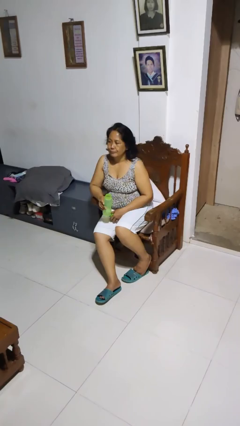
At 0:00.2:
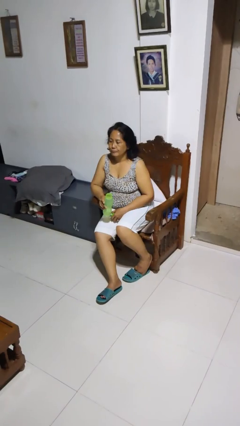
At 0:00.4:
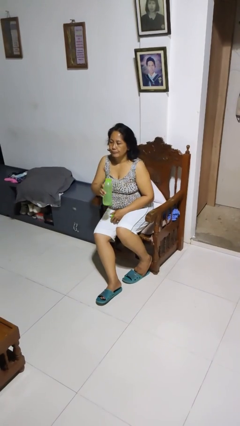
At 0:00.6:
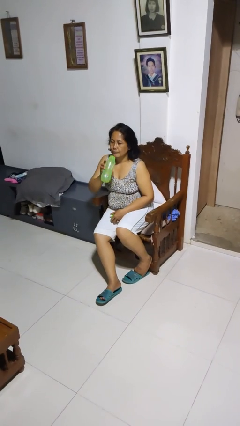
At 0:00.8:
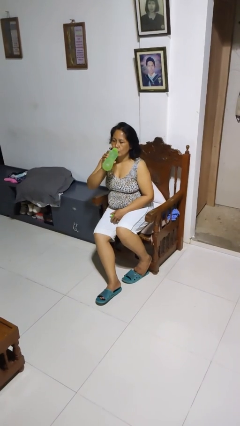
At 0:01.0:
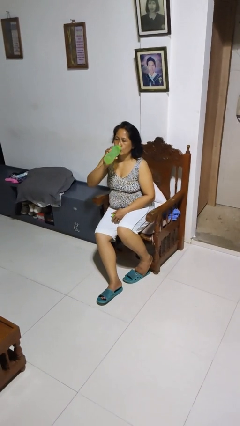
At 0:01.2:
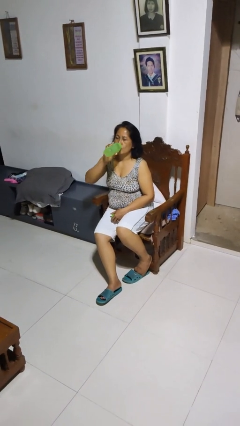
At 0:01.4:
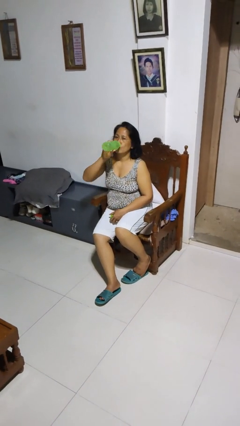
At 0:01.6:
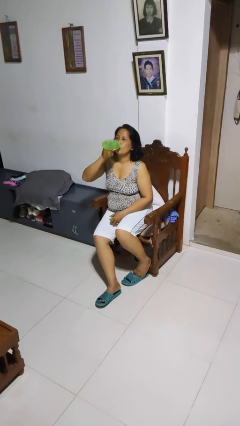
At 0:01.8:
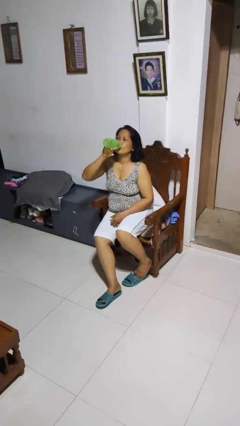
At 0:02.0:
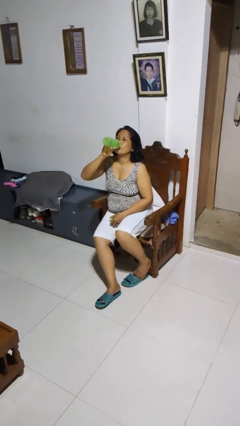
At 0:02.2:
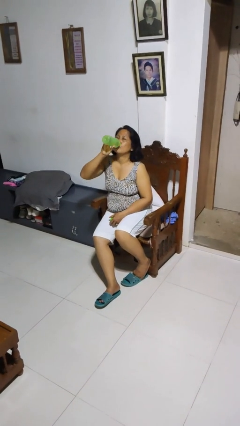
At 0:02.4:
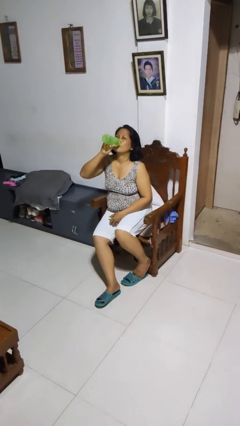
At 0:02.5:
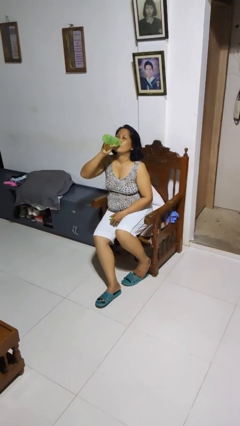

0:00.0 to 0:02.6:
person drinks from bottle

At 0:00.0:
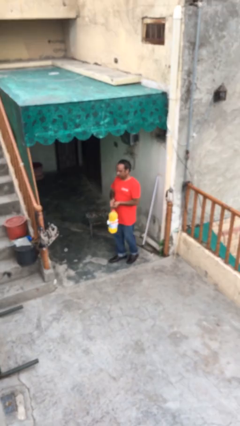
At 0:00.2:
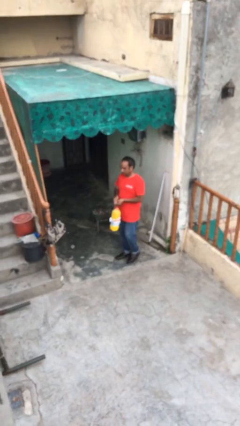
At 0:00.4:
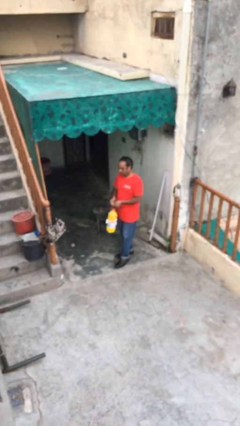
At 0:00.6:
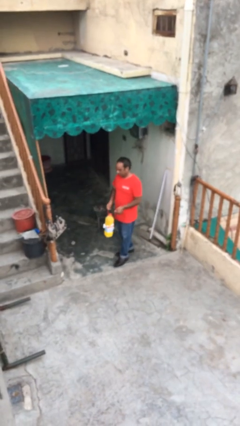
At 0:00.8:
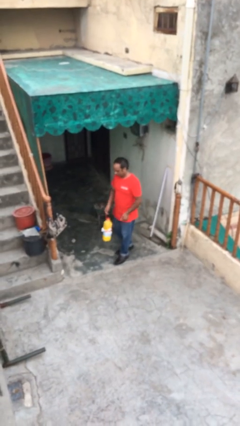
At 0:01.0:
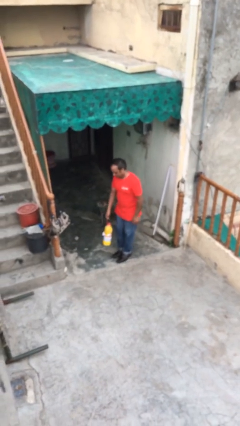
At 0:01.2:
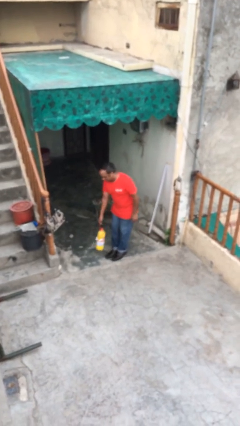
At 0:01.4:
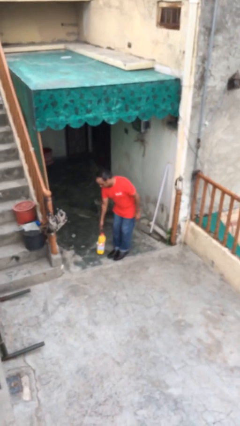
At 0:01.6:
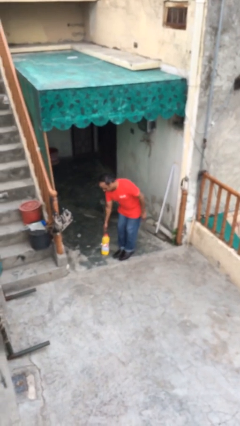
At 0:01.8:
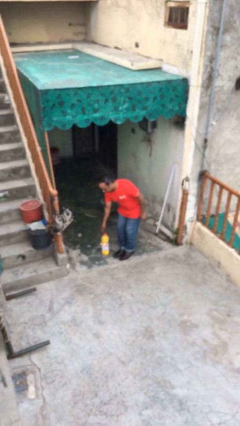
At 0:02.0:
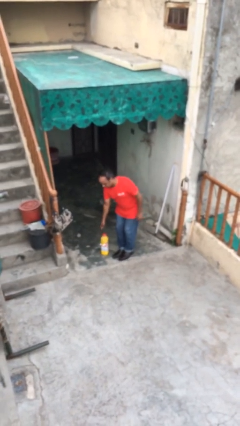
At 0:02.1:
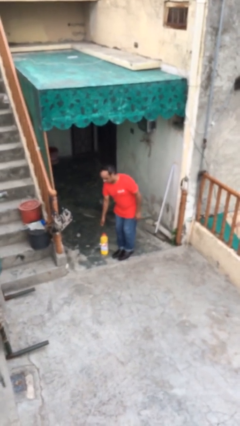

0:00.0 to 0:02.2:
person puts down object on floor

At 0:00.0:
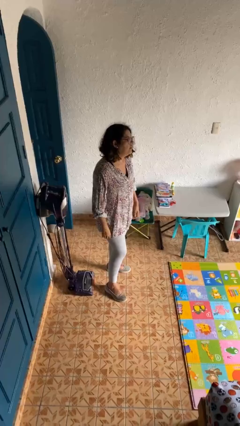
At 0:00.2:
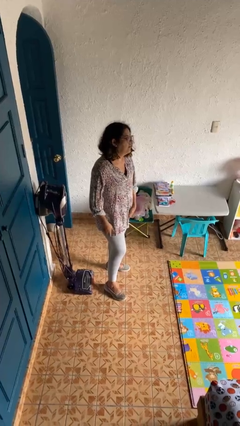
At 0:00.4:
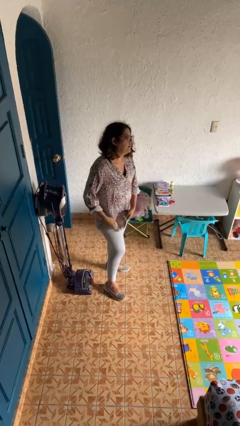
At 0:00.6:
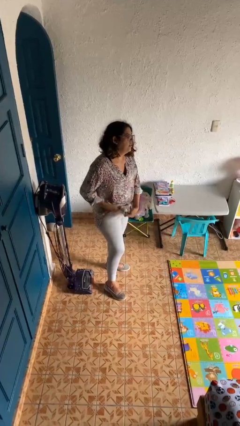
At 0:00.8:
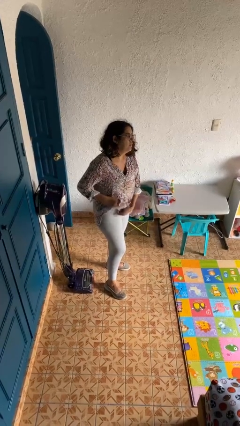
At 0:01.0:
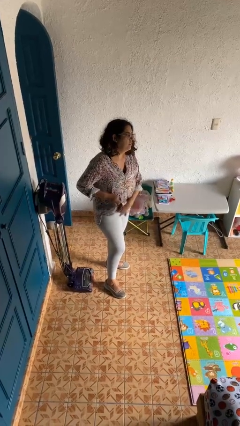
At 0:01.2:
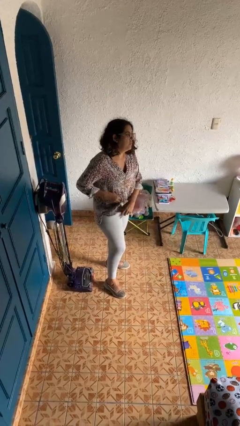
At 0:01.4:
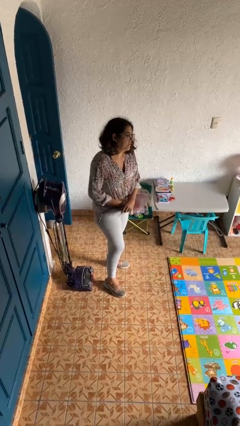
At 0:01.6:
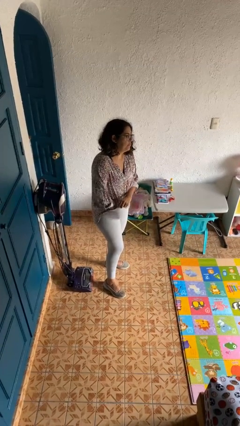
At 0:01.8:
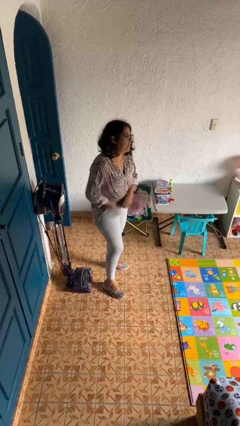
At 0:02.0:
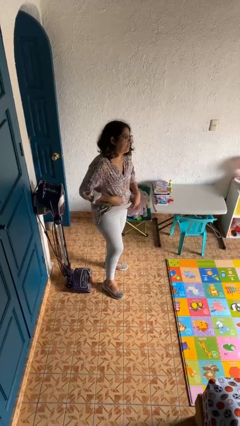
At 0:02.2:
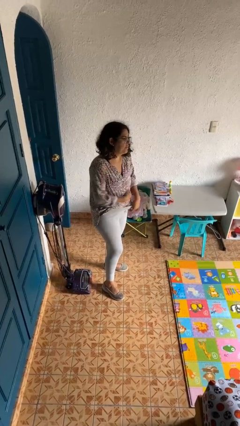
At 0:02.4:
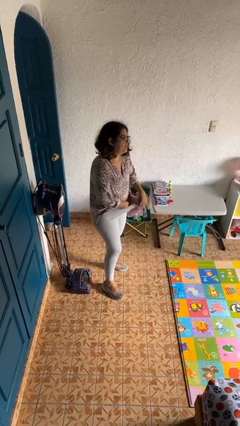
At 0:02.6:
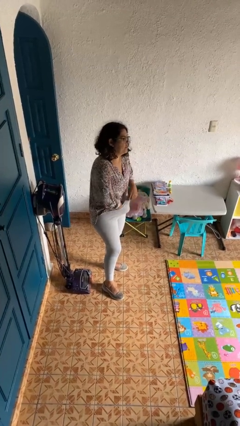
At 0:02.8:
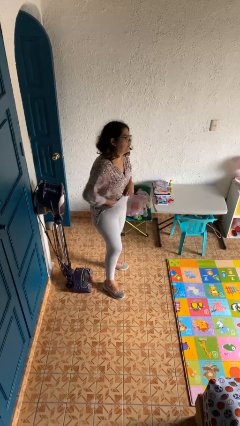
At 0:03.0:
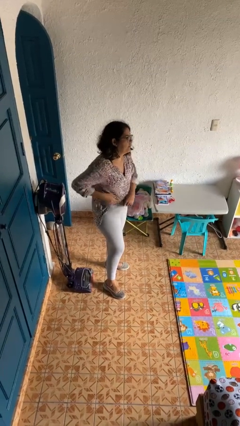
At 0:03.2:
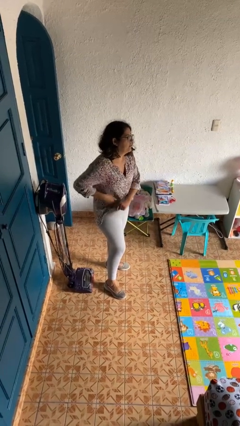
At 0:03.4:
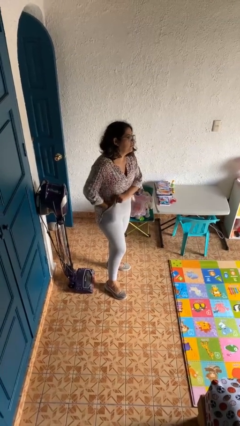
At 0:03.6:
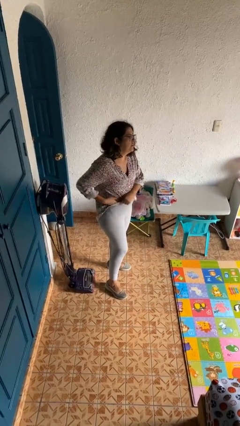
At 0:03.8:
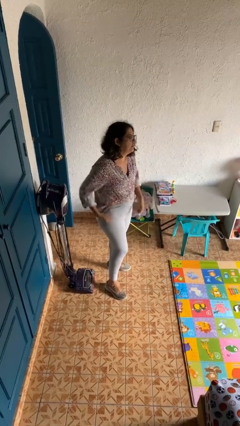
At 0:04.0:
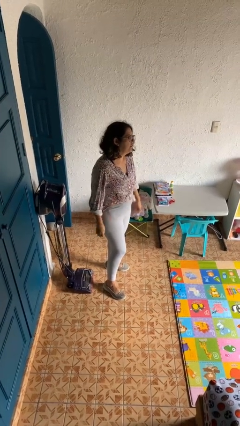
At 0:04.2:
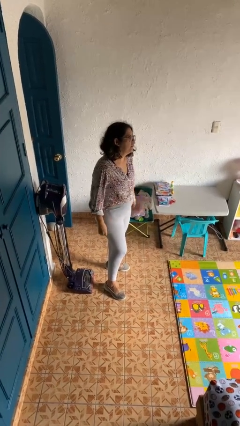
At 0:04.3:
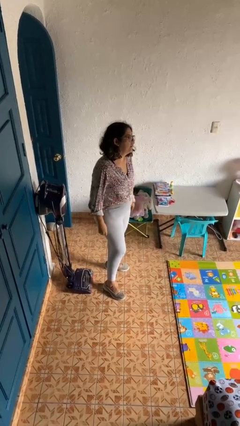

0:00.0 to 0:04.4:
person tucks in shirt

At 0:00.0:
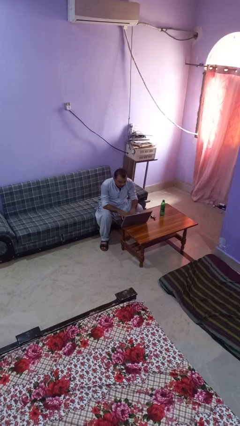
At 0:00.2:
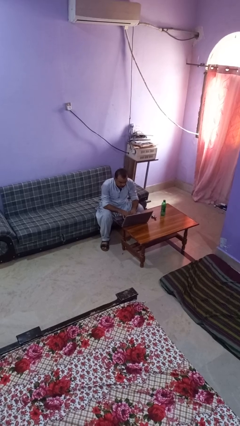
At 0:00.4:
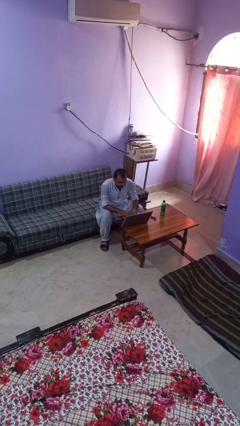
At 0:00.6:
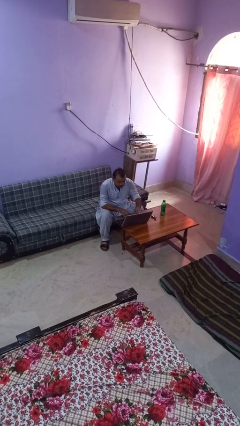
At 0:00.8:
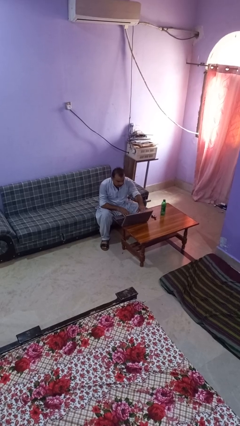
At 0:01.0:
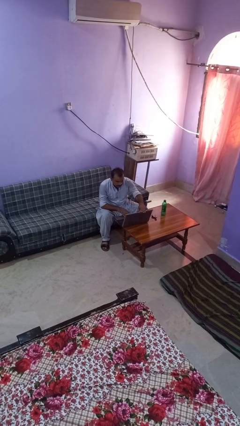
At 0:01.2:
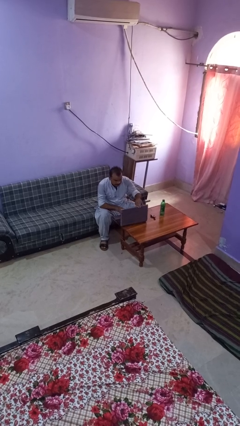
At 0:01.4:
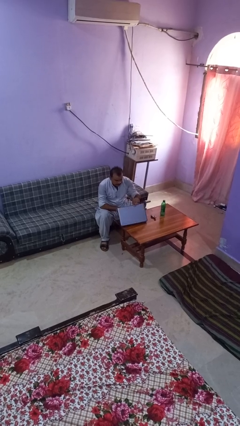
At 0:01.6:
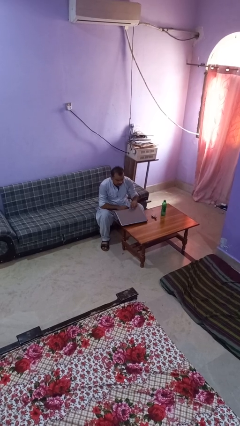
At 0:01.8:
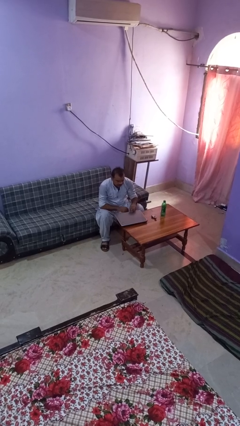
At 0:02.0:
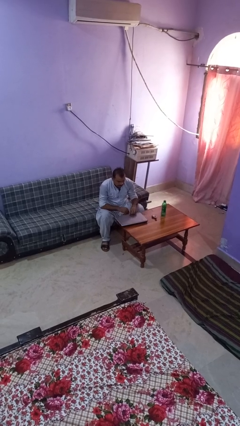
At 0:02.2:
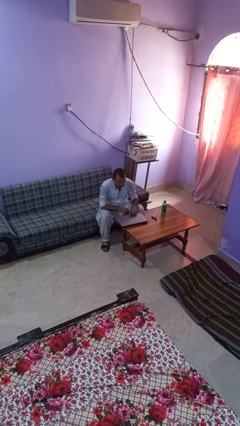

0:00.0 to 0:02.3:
person closes laptop

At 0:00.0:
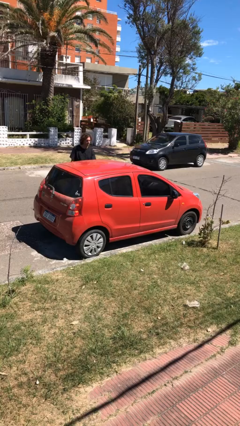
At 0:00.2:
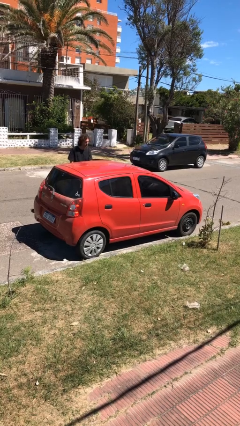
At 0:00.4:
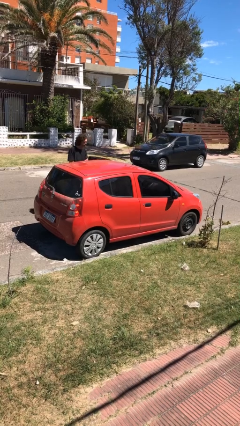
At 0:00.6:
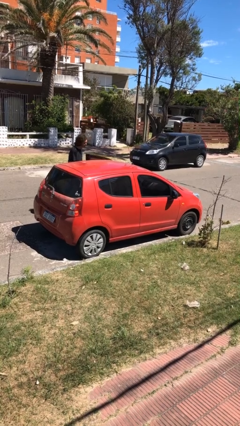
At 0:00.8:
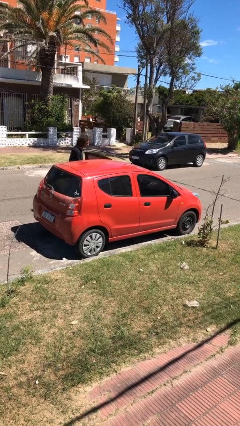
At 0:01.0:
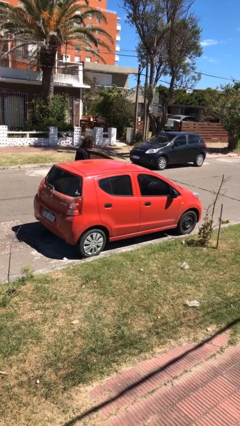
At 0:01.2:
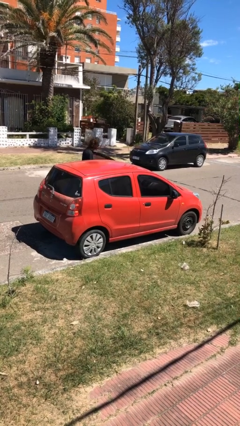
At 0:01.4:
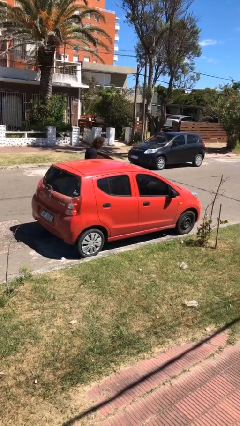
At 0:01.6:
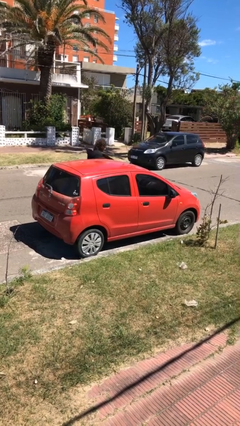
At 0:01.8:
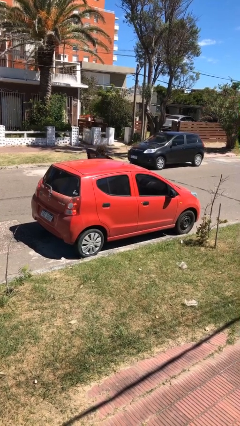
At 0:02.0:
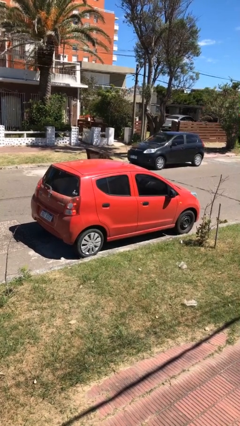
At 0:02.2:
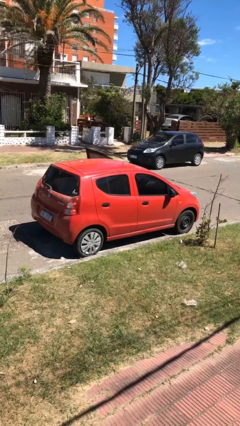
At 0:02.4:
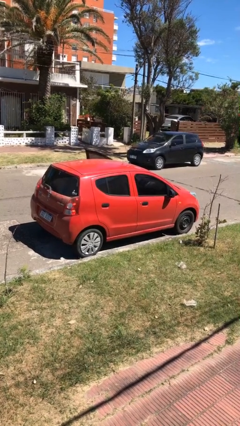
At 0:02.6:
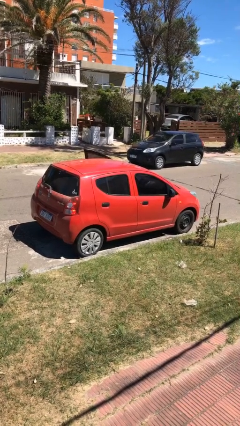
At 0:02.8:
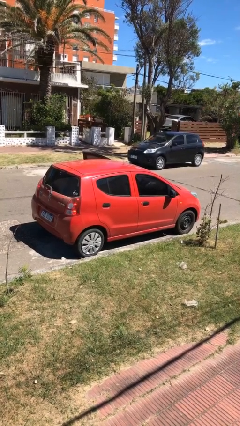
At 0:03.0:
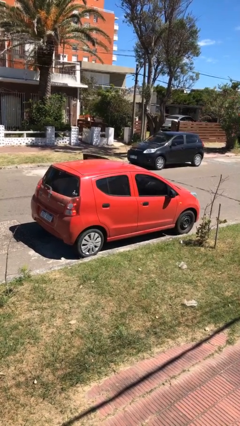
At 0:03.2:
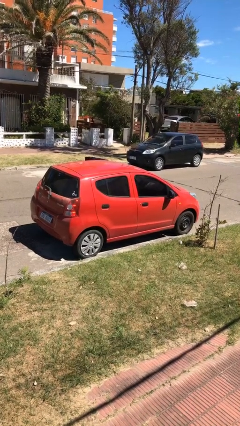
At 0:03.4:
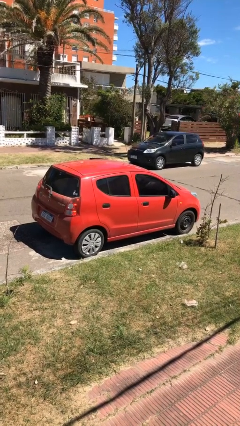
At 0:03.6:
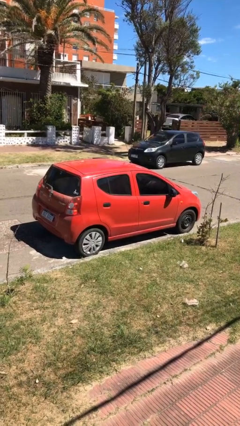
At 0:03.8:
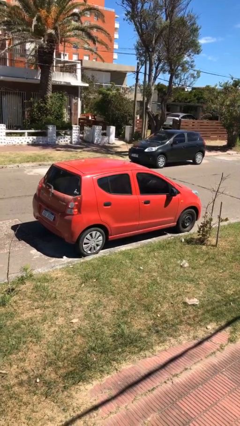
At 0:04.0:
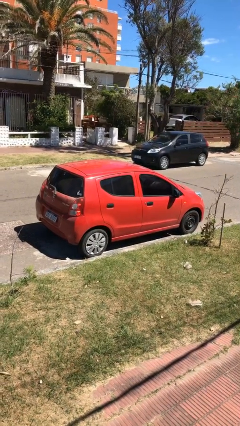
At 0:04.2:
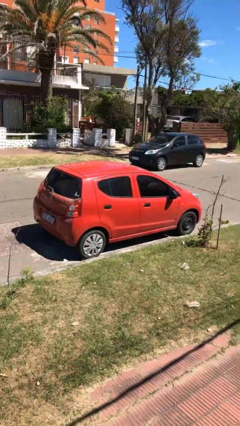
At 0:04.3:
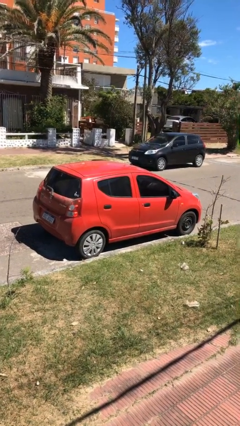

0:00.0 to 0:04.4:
car picks up person

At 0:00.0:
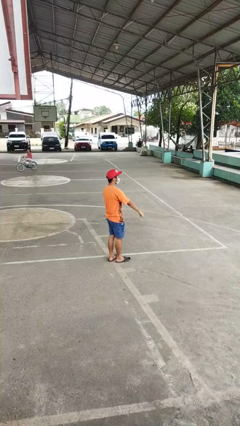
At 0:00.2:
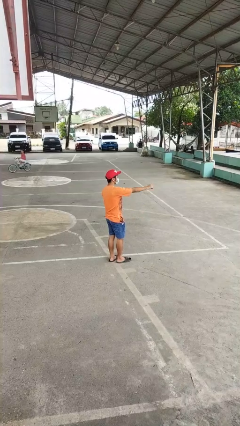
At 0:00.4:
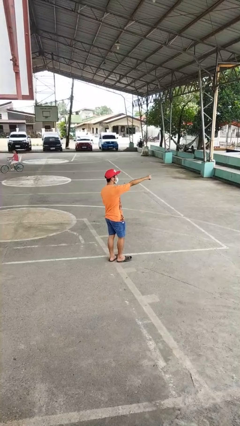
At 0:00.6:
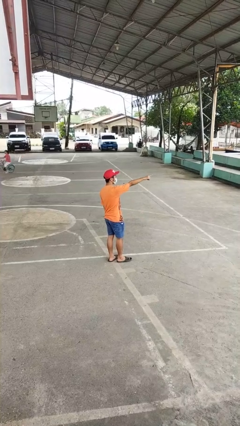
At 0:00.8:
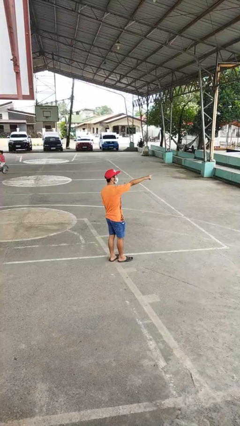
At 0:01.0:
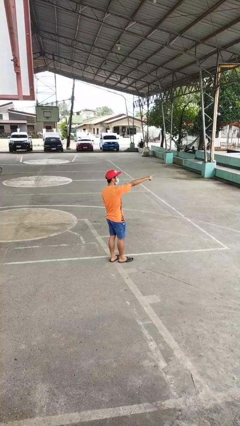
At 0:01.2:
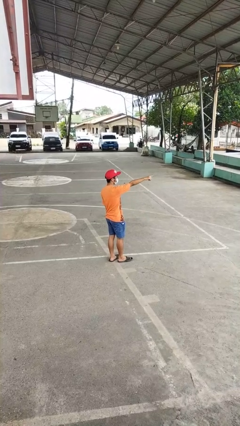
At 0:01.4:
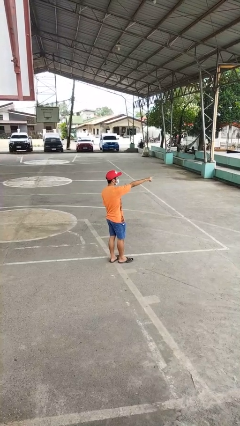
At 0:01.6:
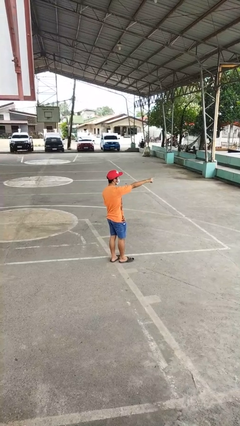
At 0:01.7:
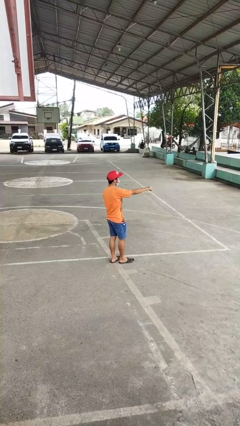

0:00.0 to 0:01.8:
person points at person
